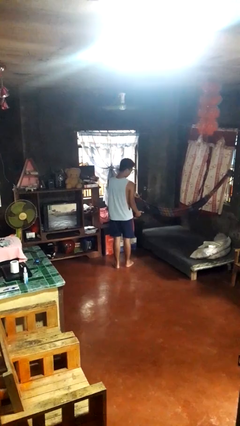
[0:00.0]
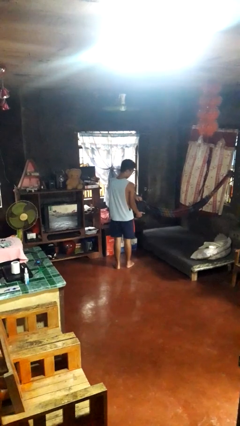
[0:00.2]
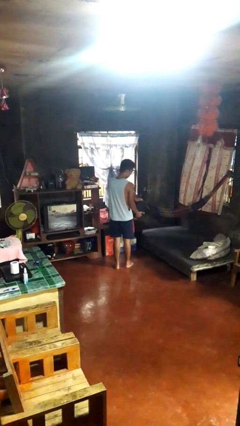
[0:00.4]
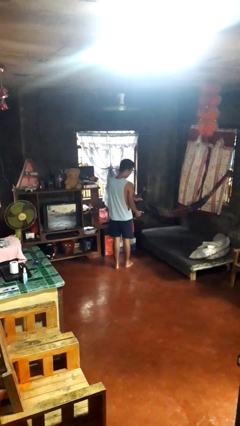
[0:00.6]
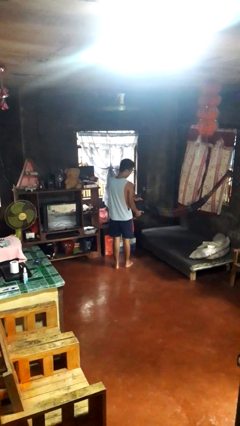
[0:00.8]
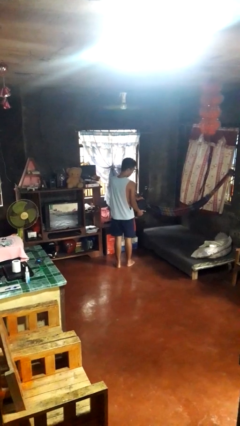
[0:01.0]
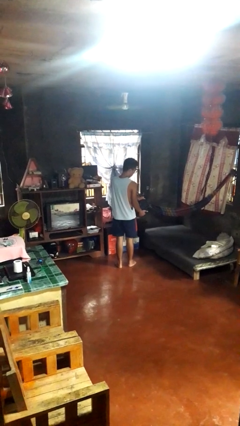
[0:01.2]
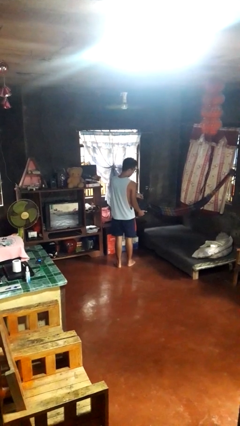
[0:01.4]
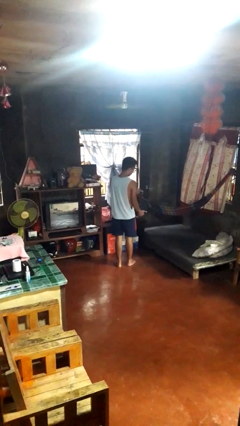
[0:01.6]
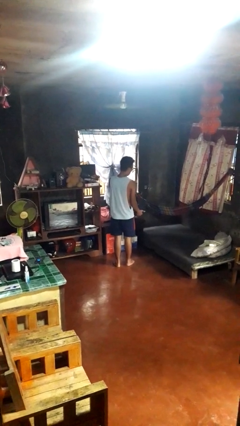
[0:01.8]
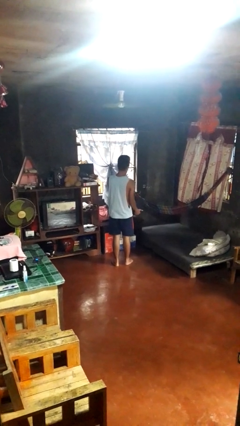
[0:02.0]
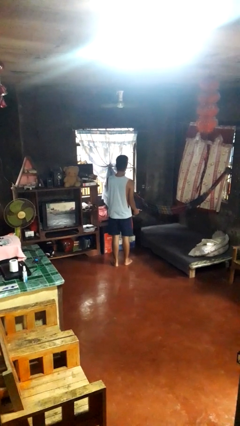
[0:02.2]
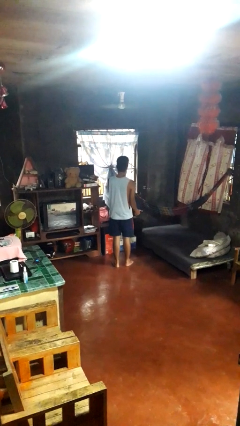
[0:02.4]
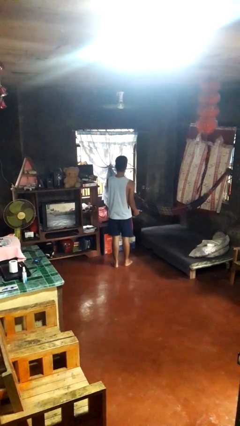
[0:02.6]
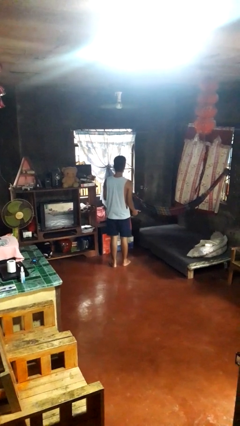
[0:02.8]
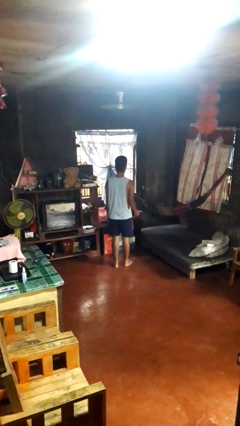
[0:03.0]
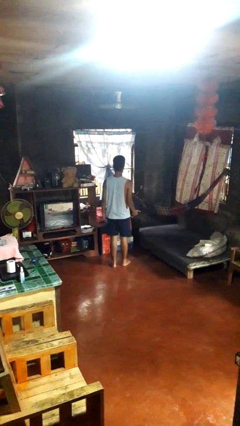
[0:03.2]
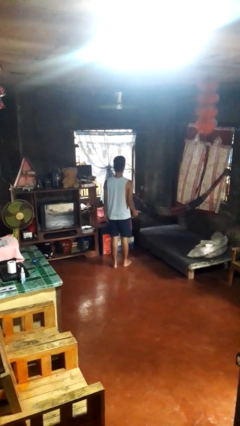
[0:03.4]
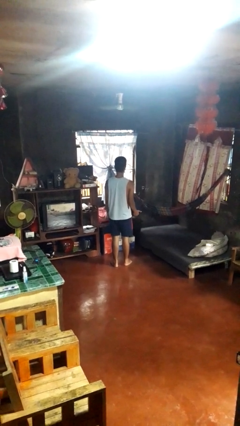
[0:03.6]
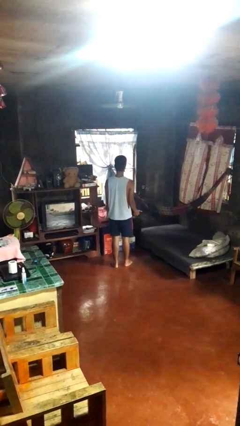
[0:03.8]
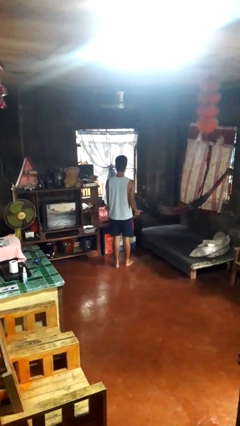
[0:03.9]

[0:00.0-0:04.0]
person eats snack from bag

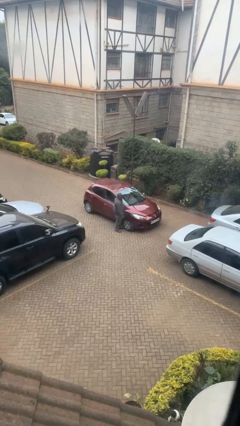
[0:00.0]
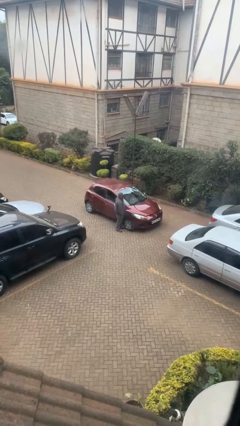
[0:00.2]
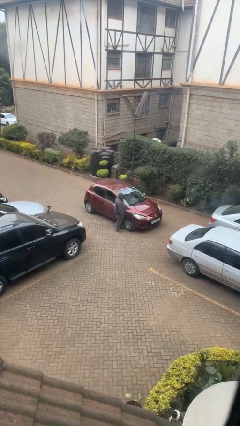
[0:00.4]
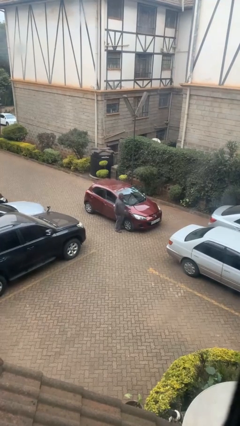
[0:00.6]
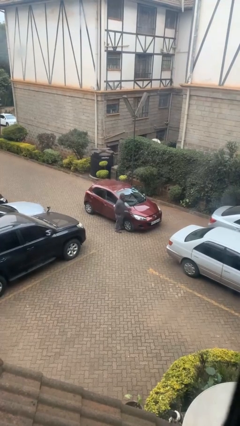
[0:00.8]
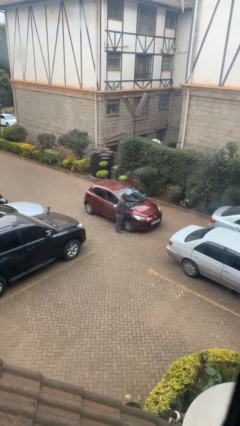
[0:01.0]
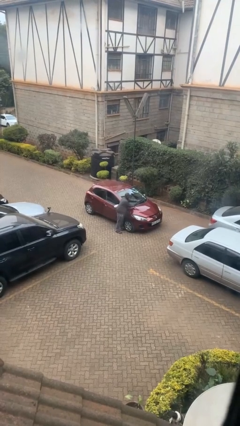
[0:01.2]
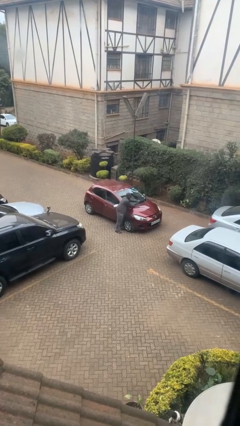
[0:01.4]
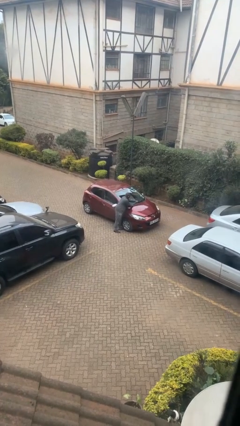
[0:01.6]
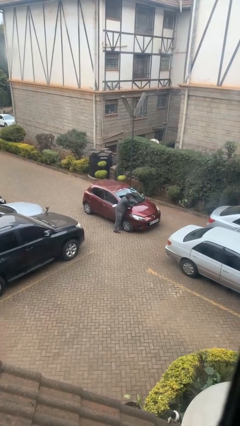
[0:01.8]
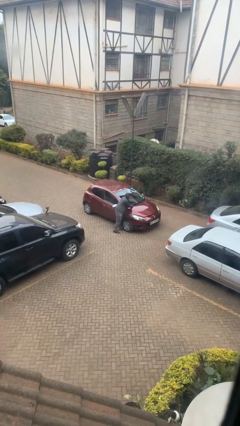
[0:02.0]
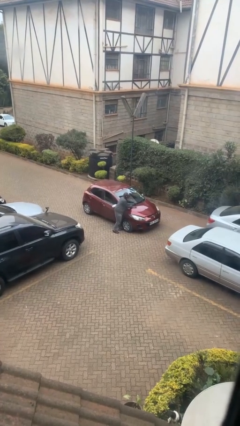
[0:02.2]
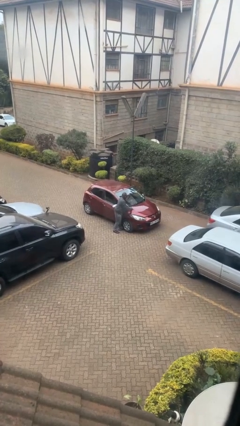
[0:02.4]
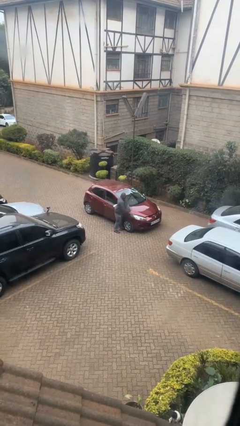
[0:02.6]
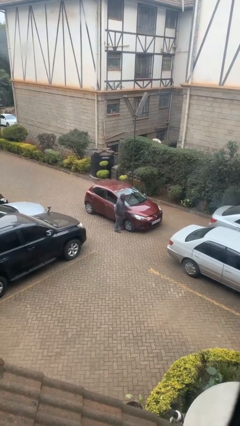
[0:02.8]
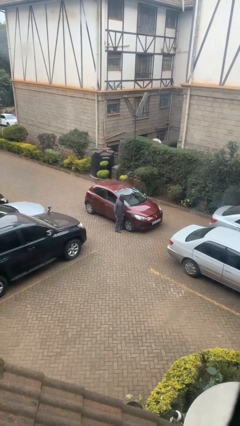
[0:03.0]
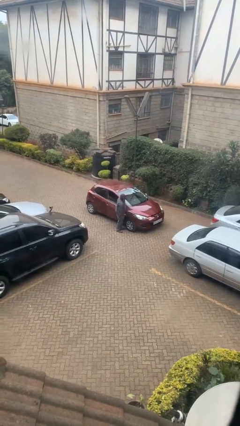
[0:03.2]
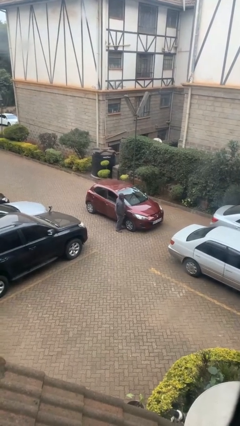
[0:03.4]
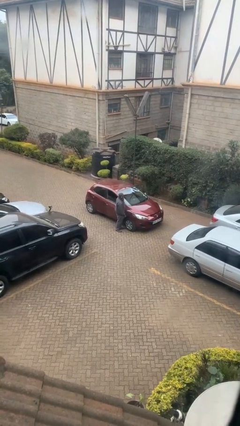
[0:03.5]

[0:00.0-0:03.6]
person flips down car wipers

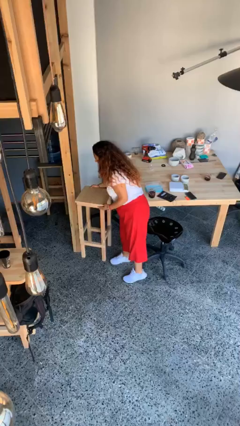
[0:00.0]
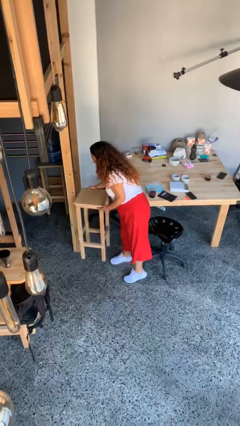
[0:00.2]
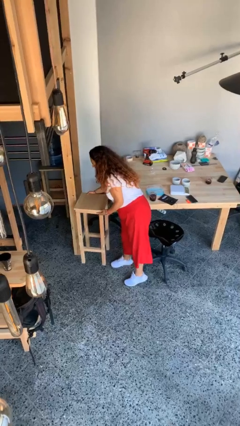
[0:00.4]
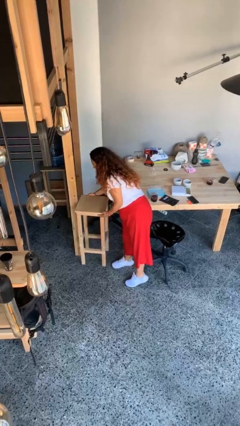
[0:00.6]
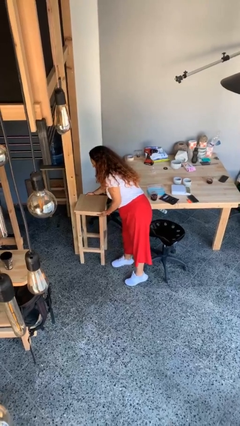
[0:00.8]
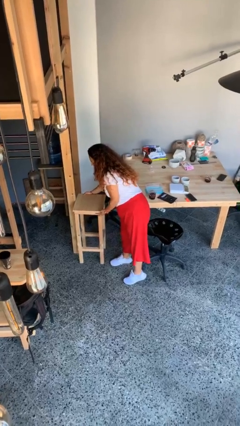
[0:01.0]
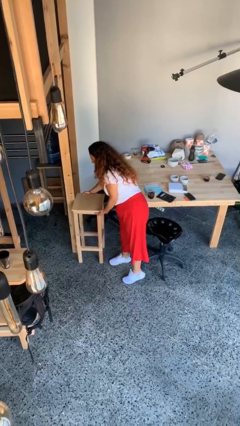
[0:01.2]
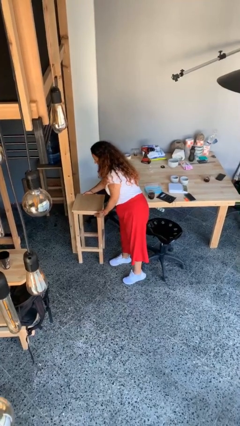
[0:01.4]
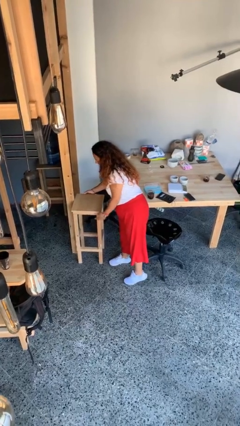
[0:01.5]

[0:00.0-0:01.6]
person puts down object on floor

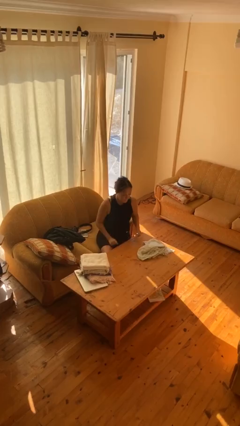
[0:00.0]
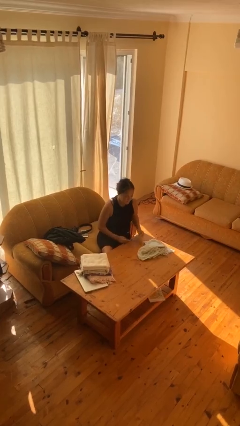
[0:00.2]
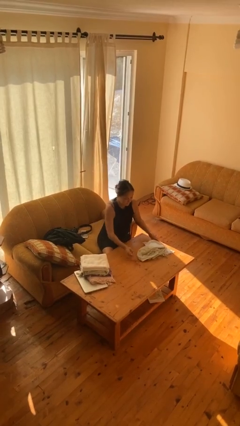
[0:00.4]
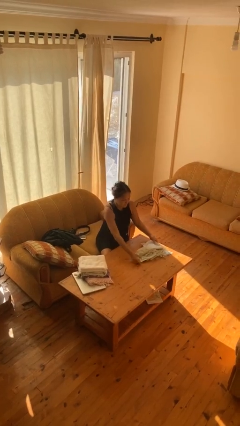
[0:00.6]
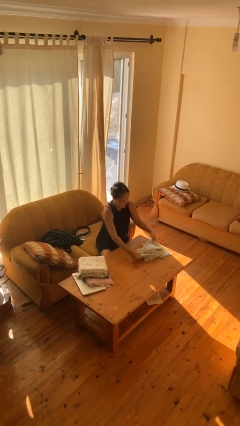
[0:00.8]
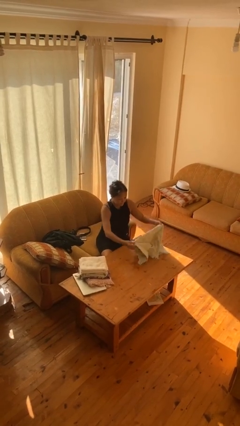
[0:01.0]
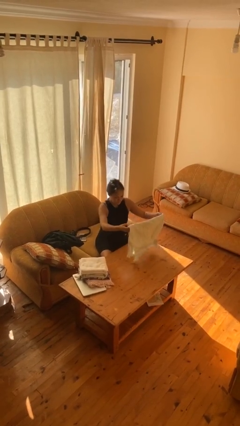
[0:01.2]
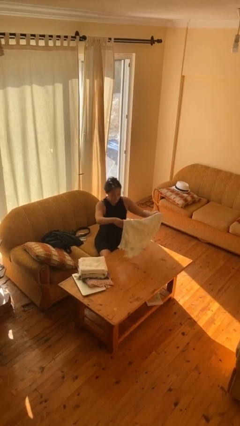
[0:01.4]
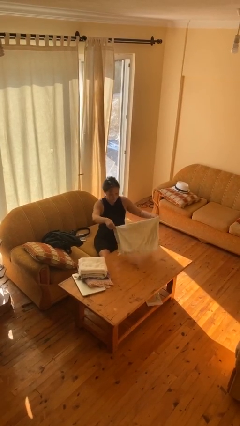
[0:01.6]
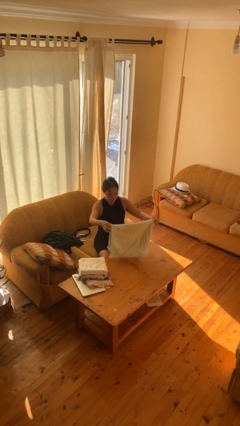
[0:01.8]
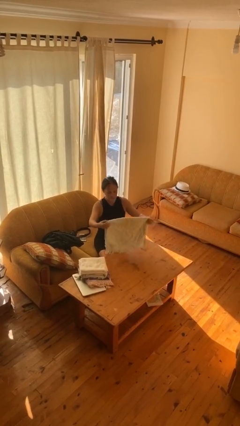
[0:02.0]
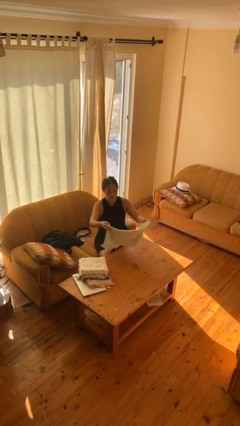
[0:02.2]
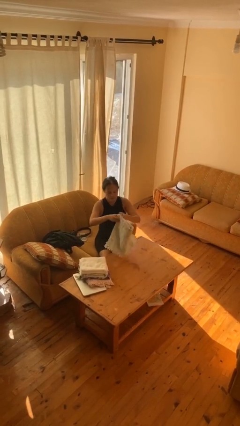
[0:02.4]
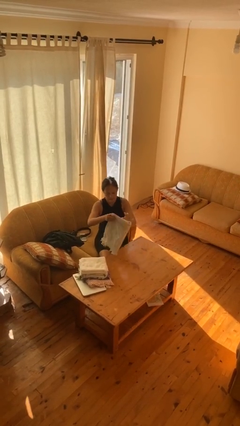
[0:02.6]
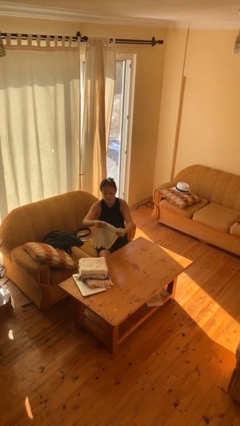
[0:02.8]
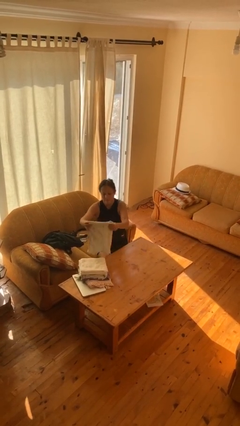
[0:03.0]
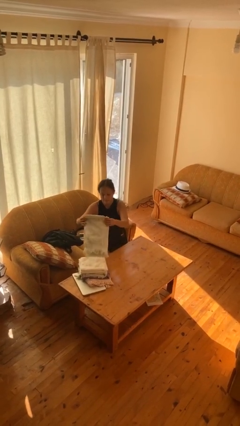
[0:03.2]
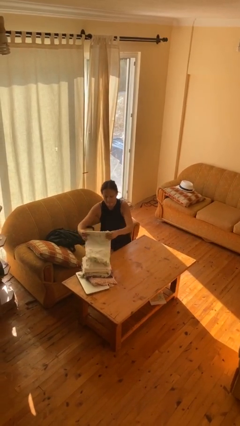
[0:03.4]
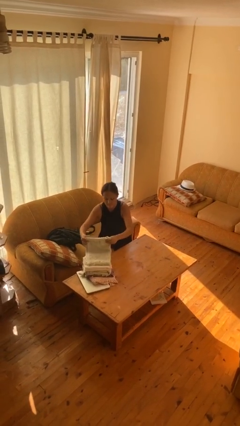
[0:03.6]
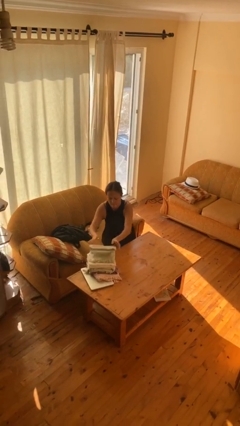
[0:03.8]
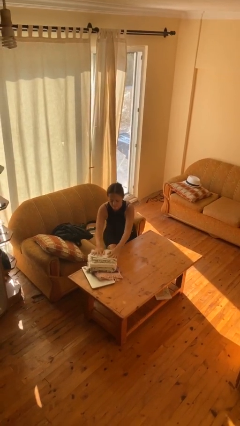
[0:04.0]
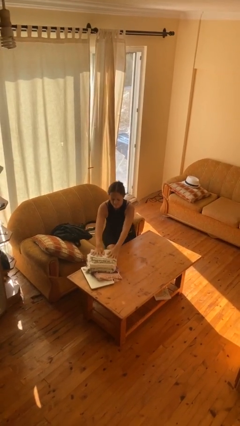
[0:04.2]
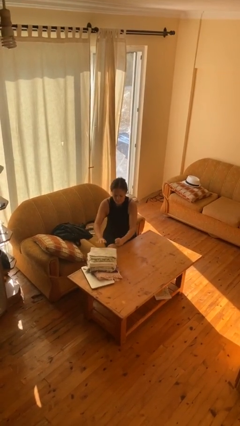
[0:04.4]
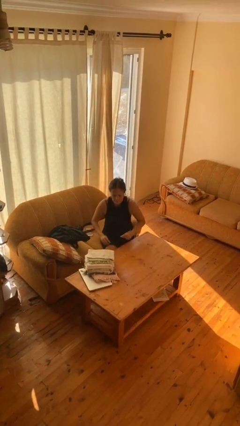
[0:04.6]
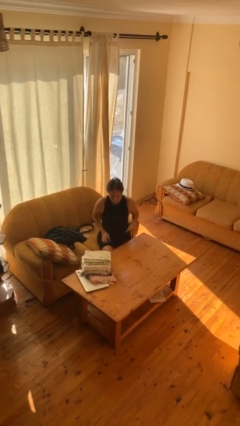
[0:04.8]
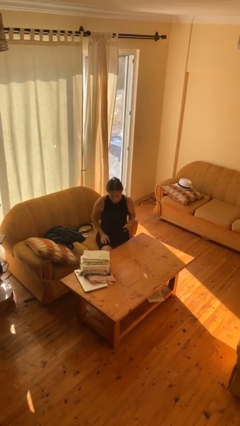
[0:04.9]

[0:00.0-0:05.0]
person folds towel

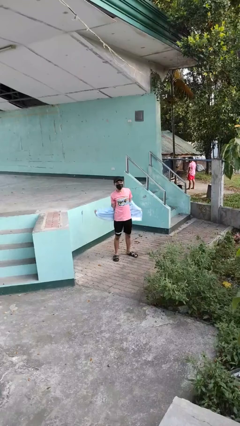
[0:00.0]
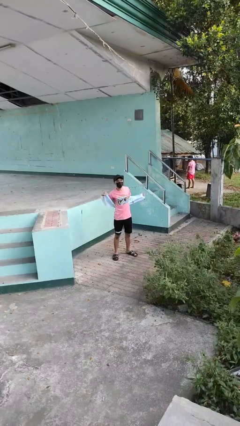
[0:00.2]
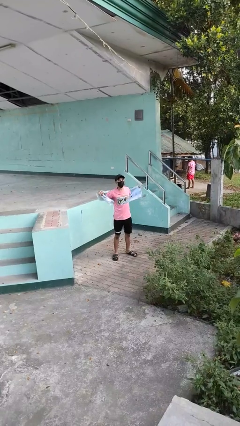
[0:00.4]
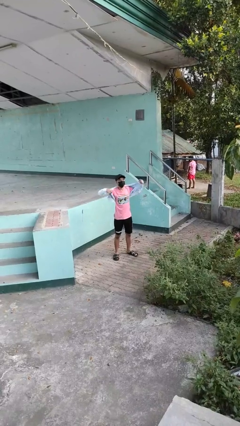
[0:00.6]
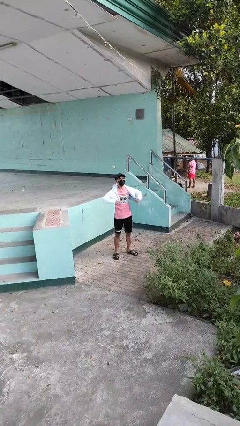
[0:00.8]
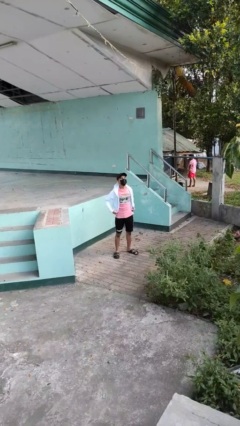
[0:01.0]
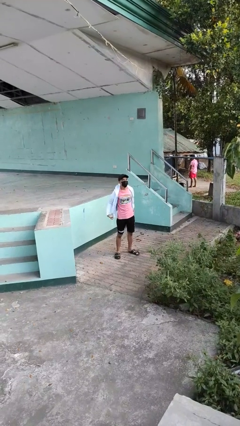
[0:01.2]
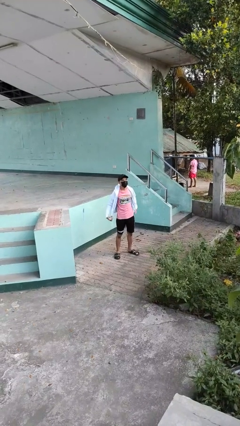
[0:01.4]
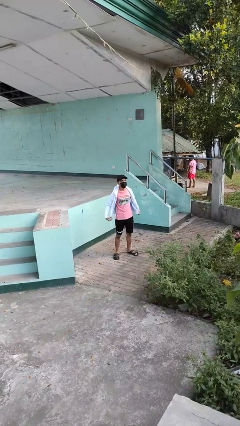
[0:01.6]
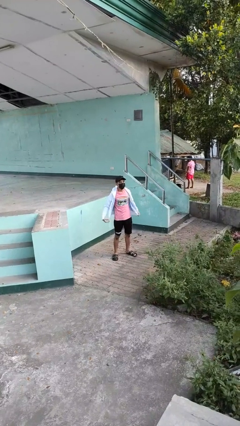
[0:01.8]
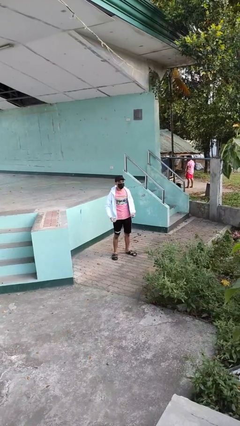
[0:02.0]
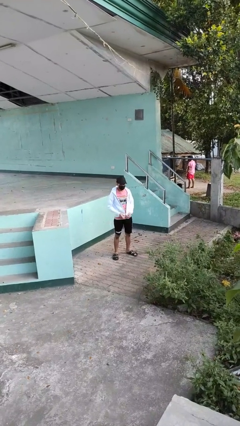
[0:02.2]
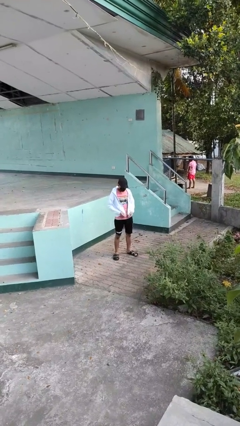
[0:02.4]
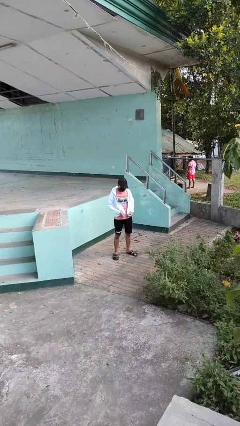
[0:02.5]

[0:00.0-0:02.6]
person puts on jacket

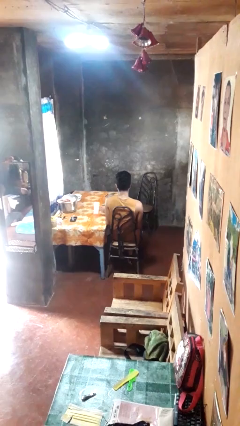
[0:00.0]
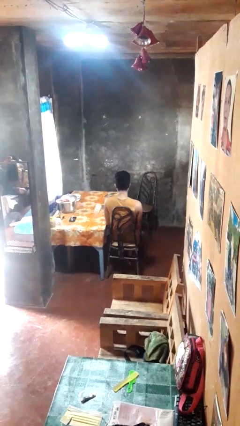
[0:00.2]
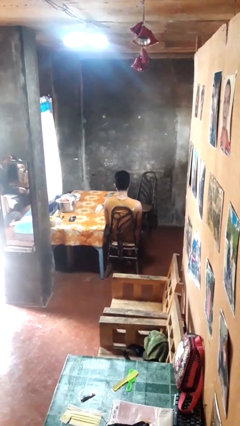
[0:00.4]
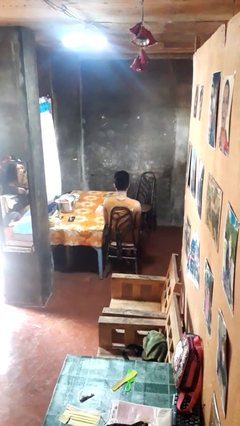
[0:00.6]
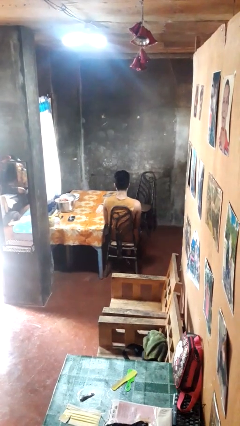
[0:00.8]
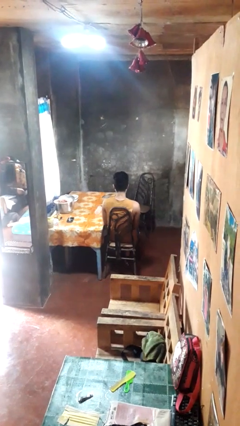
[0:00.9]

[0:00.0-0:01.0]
person knocks over glass
